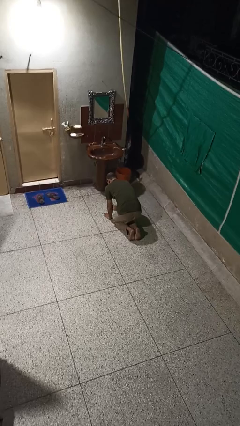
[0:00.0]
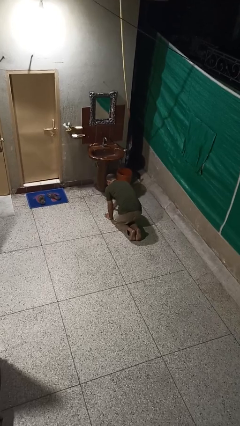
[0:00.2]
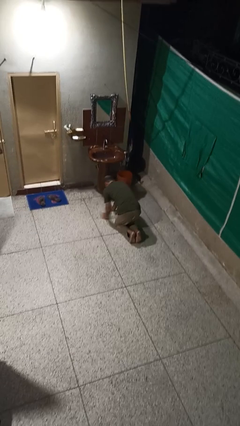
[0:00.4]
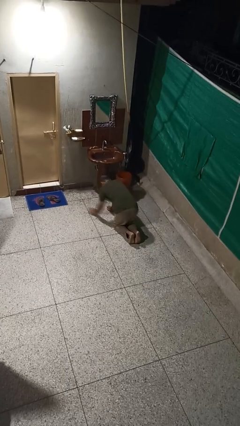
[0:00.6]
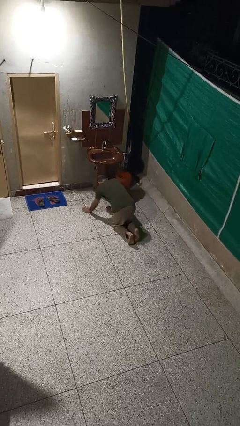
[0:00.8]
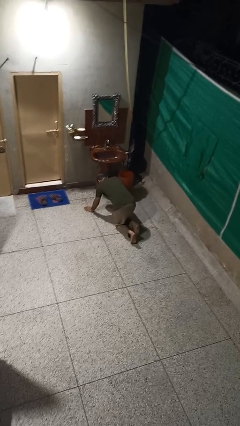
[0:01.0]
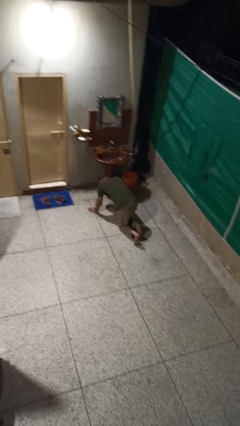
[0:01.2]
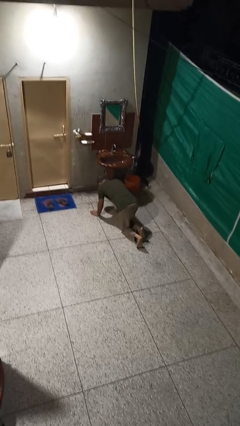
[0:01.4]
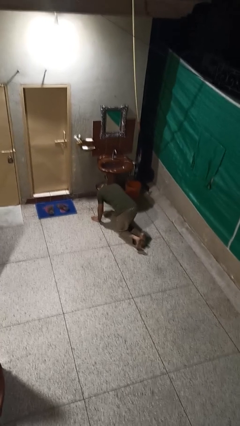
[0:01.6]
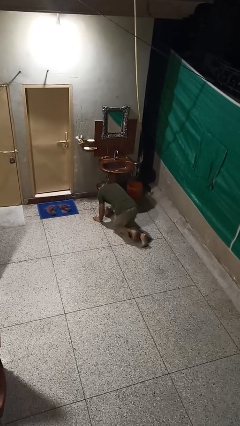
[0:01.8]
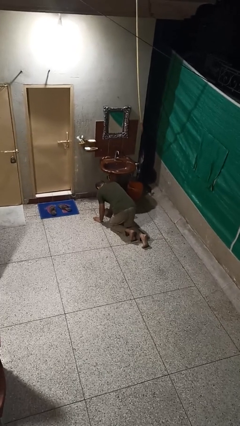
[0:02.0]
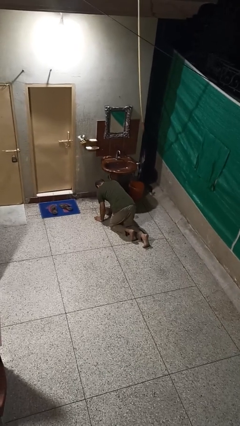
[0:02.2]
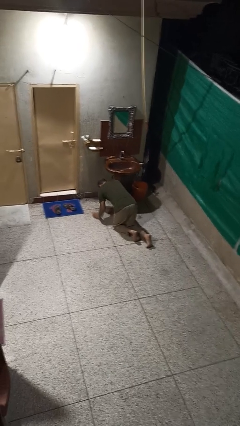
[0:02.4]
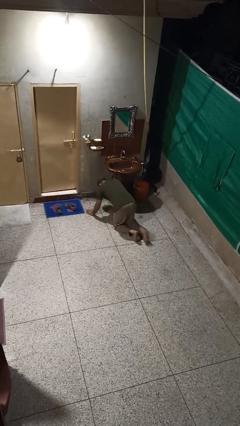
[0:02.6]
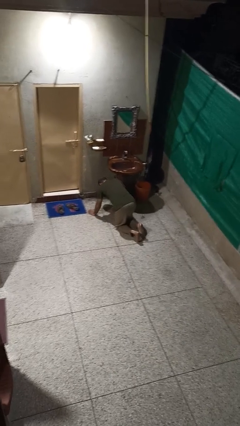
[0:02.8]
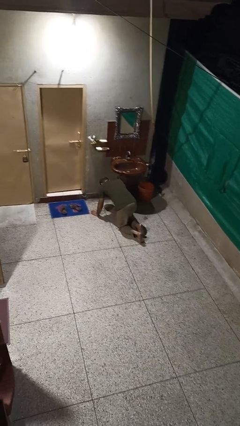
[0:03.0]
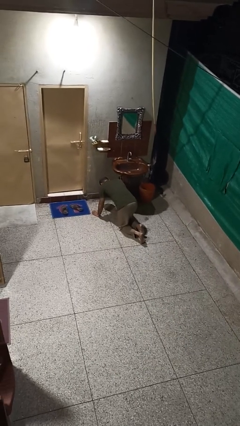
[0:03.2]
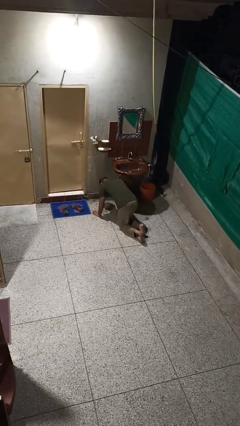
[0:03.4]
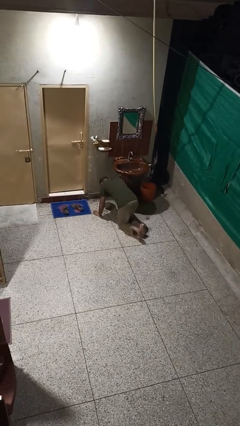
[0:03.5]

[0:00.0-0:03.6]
person crawls

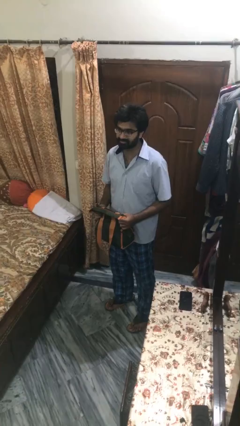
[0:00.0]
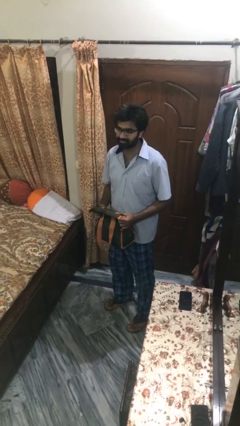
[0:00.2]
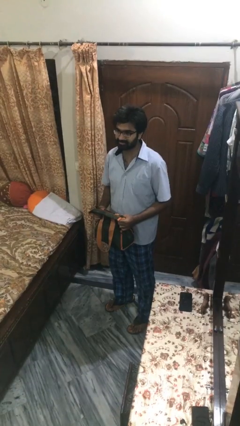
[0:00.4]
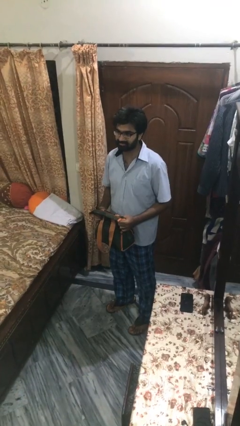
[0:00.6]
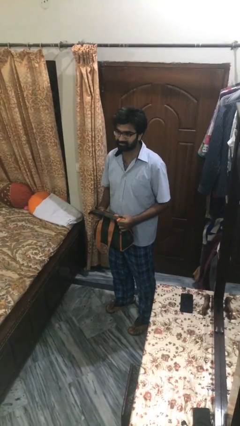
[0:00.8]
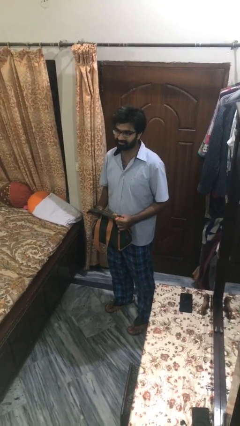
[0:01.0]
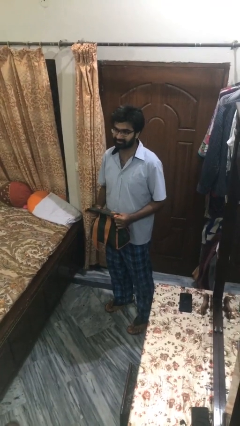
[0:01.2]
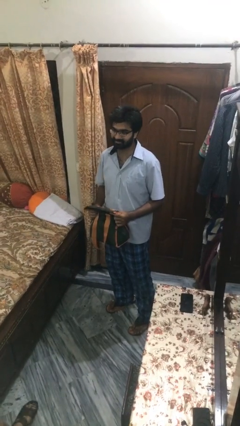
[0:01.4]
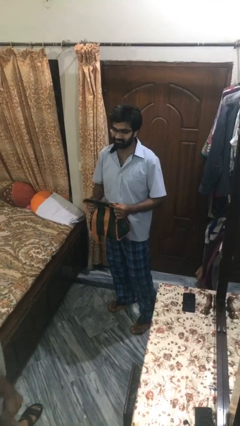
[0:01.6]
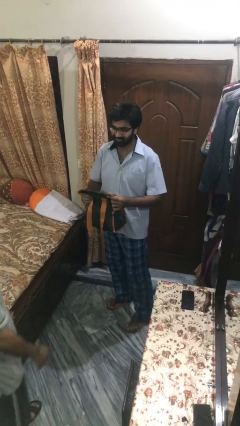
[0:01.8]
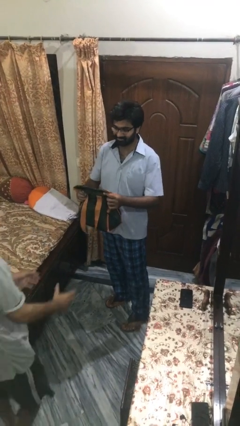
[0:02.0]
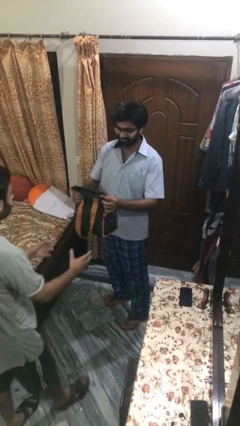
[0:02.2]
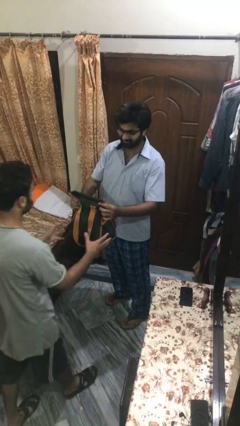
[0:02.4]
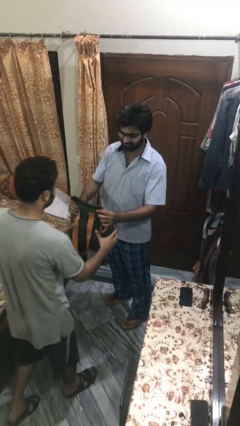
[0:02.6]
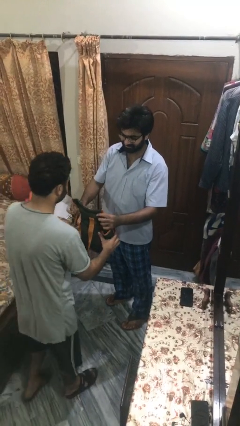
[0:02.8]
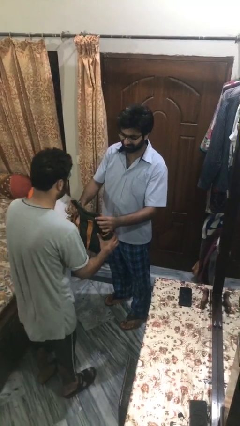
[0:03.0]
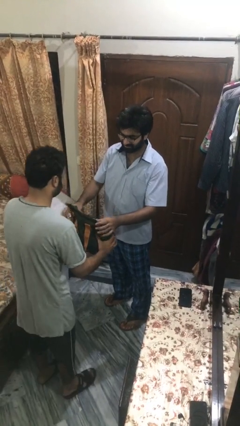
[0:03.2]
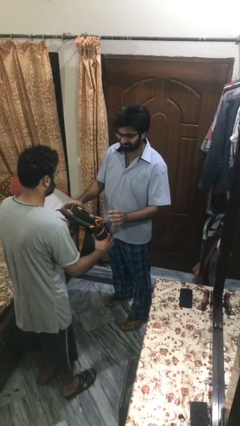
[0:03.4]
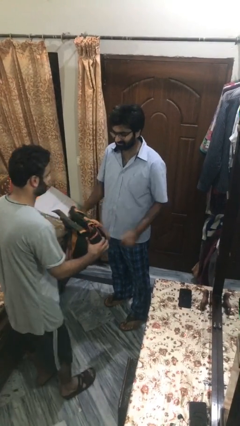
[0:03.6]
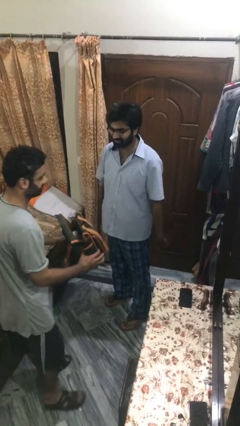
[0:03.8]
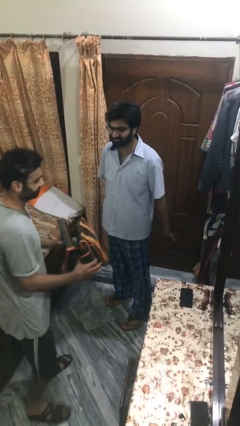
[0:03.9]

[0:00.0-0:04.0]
person transfers object to person

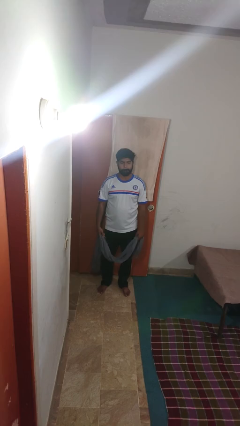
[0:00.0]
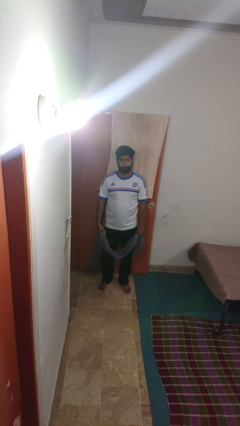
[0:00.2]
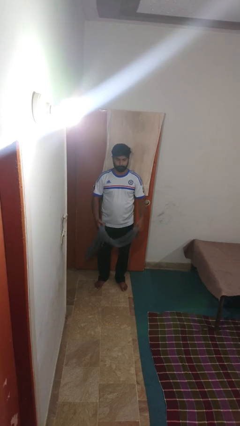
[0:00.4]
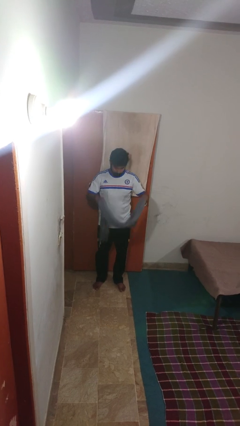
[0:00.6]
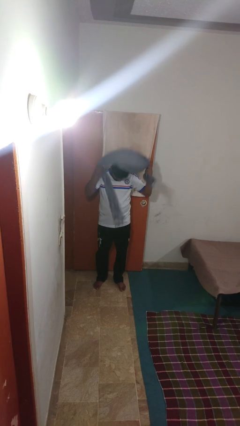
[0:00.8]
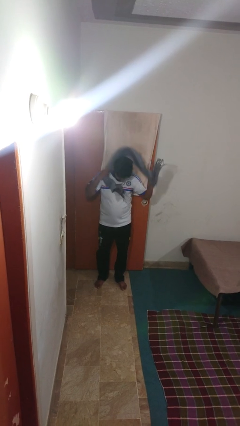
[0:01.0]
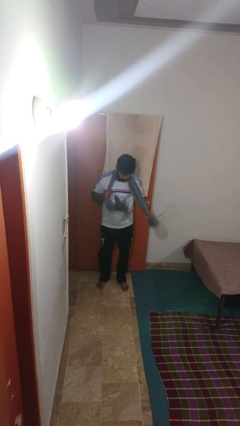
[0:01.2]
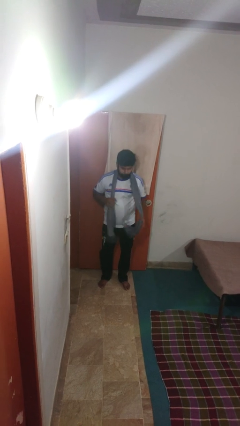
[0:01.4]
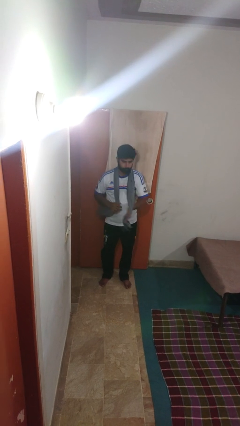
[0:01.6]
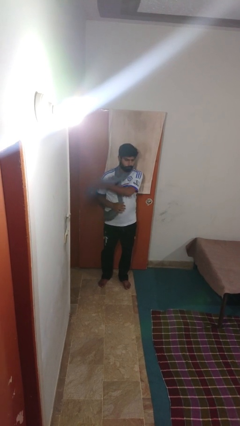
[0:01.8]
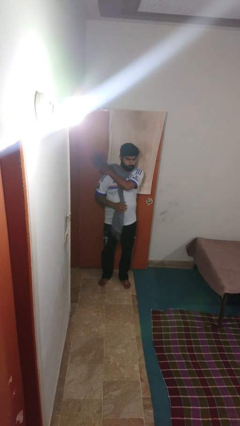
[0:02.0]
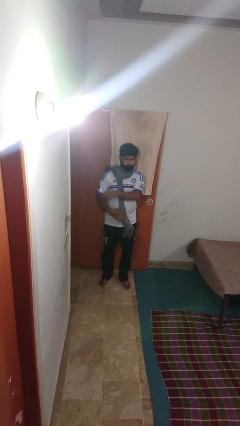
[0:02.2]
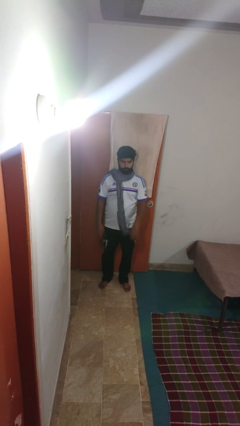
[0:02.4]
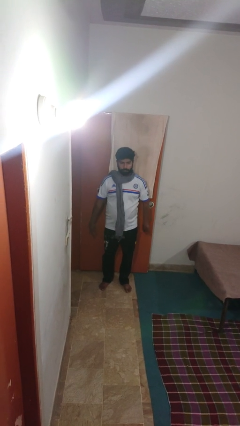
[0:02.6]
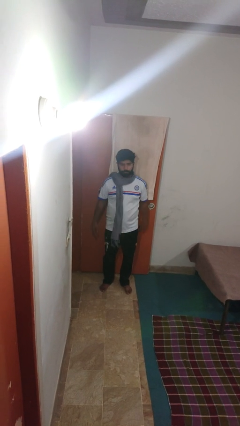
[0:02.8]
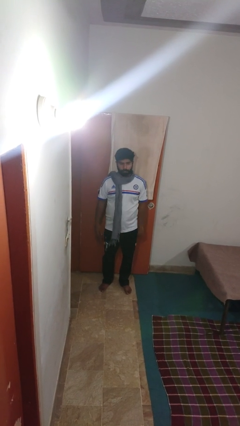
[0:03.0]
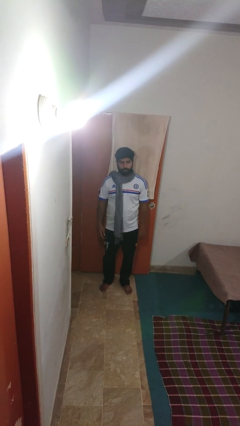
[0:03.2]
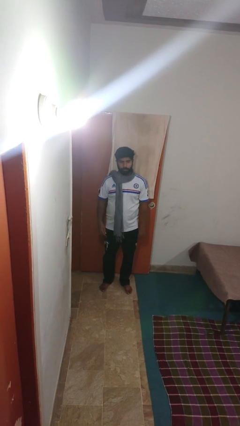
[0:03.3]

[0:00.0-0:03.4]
person puts on scarf

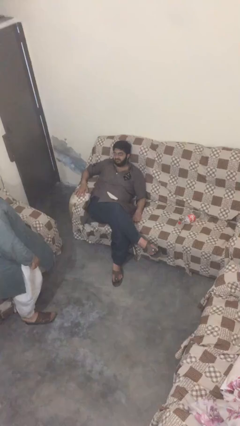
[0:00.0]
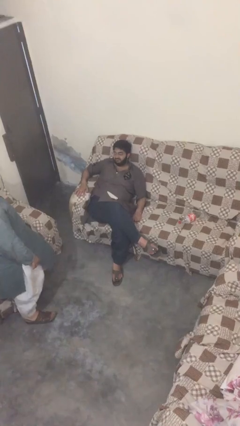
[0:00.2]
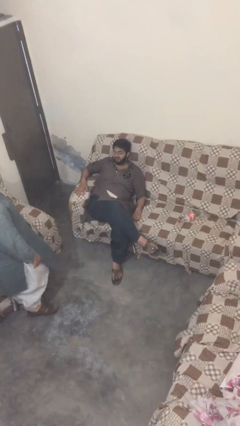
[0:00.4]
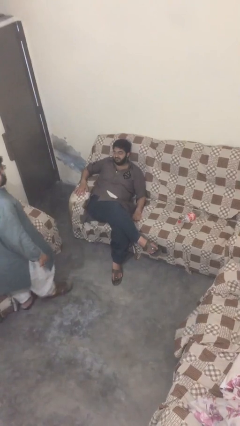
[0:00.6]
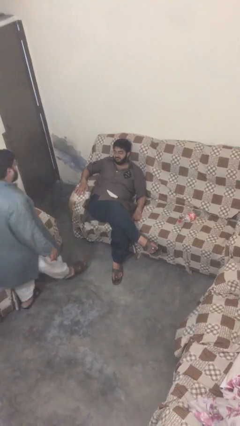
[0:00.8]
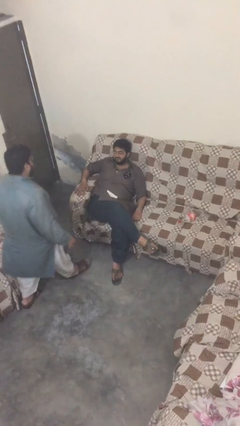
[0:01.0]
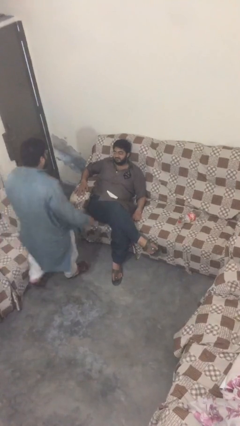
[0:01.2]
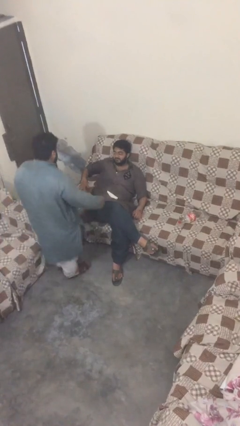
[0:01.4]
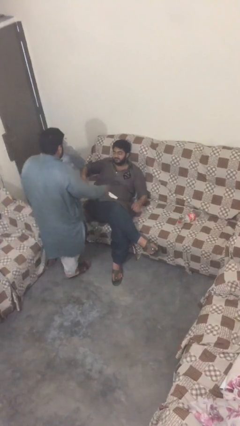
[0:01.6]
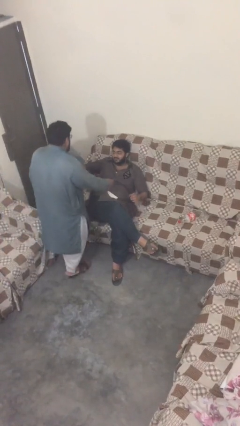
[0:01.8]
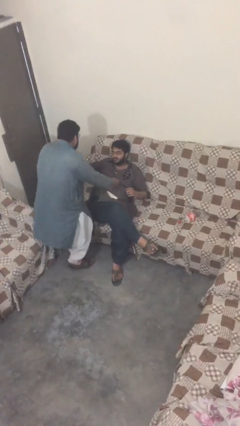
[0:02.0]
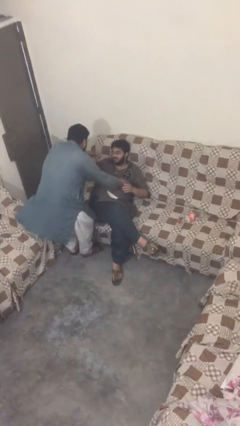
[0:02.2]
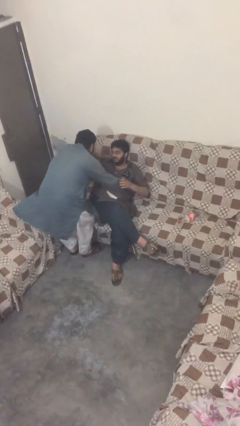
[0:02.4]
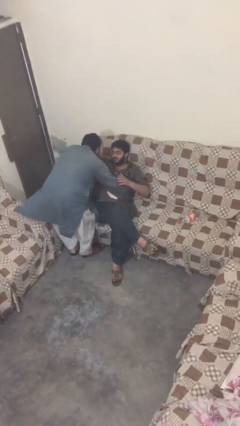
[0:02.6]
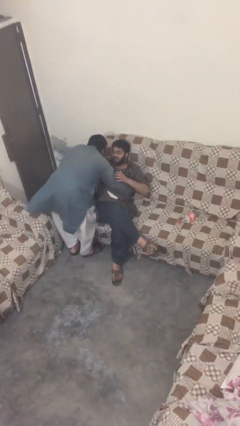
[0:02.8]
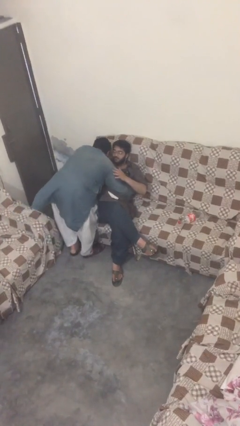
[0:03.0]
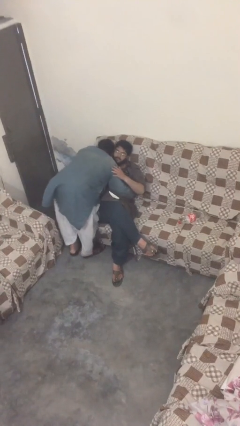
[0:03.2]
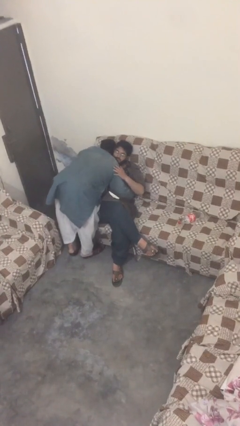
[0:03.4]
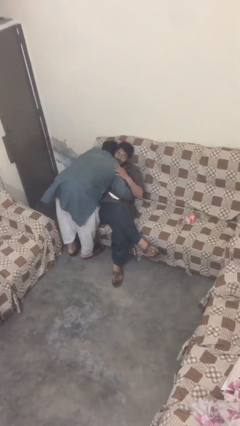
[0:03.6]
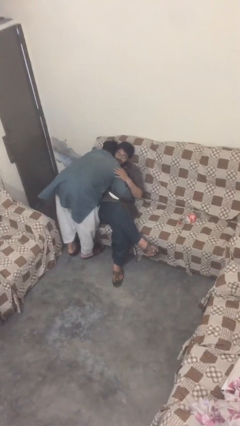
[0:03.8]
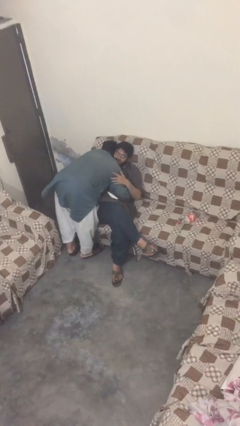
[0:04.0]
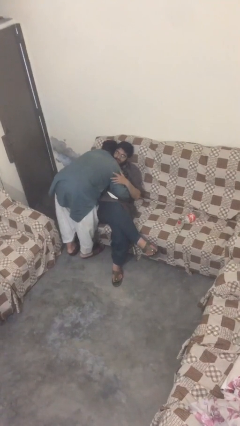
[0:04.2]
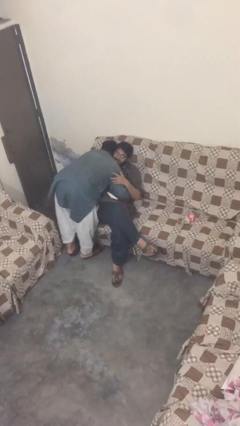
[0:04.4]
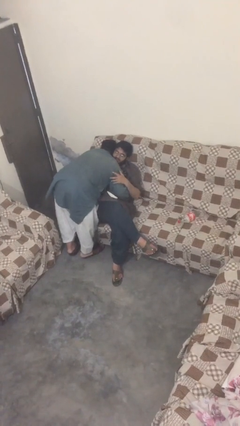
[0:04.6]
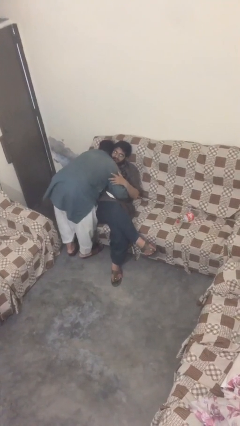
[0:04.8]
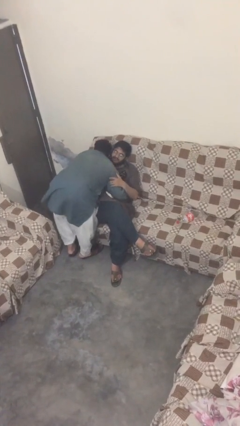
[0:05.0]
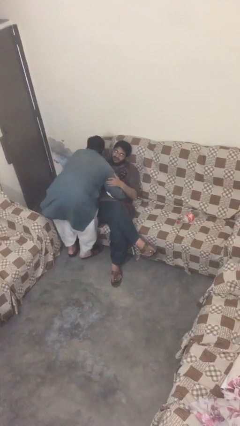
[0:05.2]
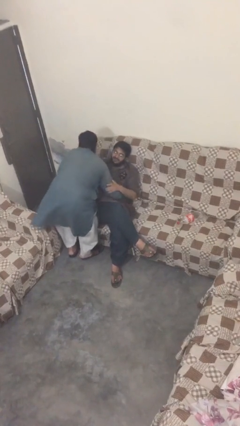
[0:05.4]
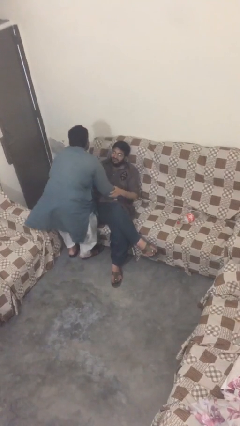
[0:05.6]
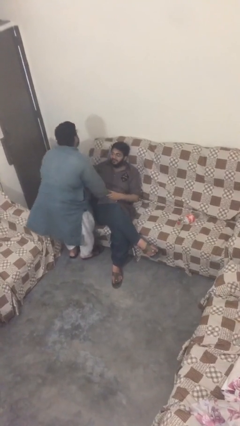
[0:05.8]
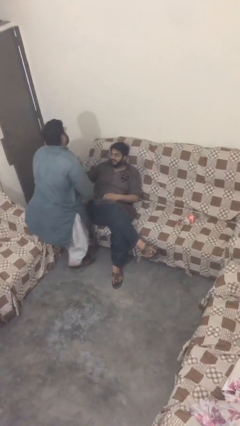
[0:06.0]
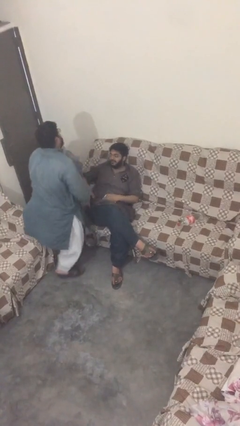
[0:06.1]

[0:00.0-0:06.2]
person embraces person

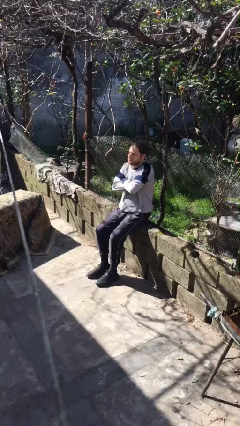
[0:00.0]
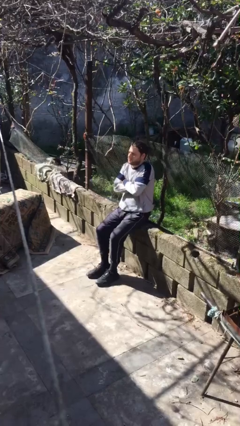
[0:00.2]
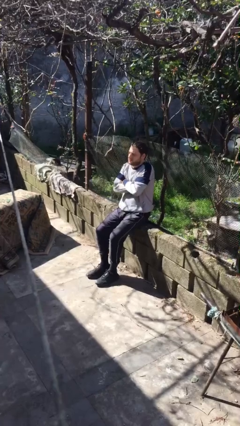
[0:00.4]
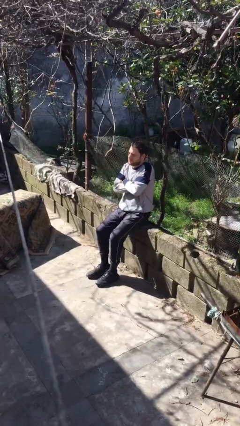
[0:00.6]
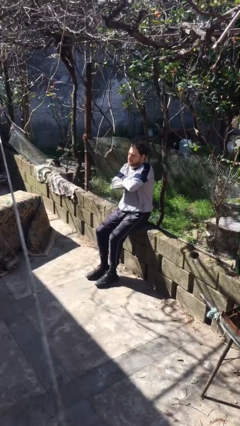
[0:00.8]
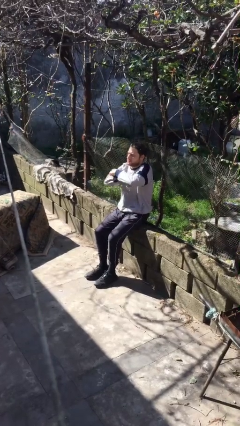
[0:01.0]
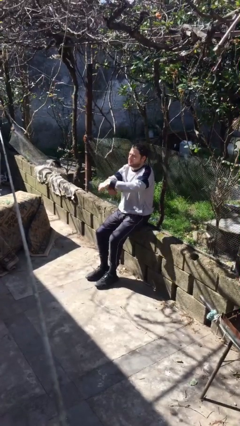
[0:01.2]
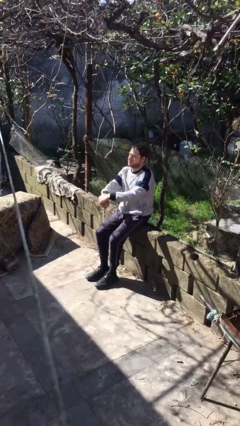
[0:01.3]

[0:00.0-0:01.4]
person crosses arms
